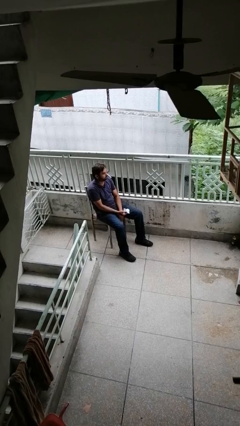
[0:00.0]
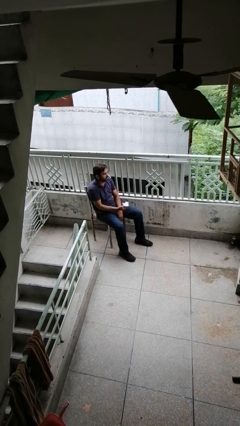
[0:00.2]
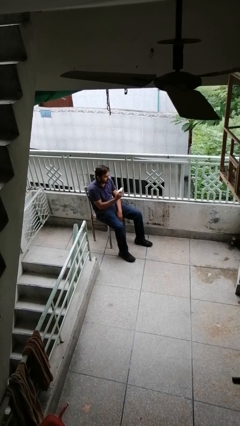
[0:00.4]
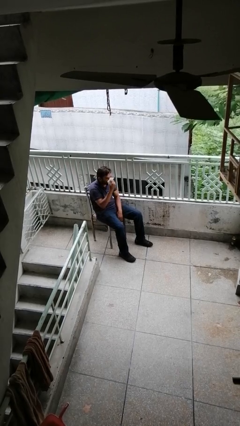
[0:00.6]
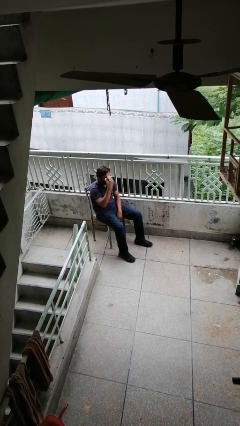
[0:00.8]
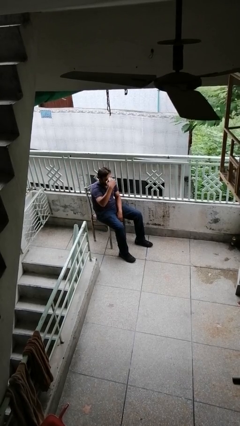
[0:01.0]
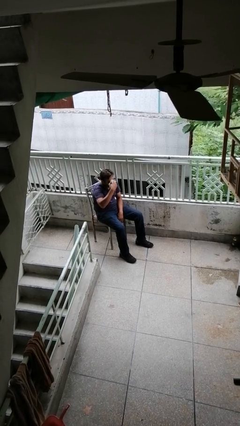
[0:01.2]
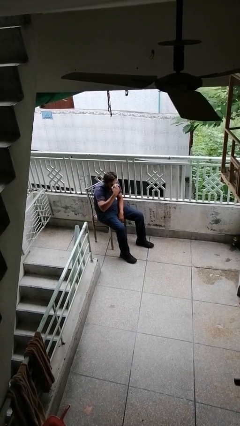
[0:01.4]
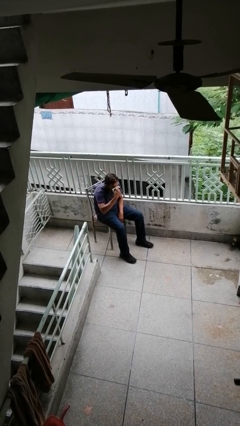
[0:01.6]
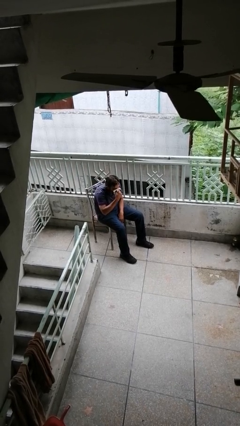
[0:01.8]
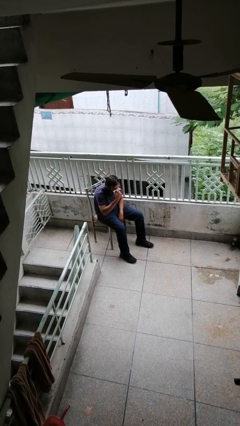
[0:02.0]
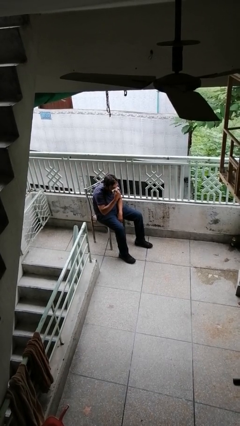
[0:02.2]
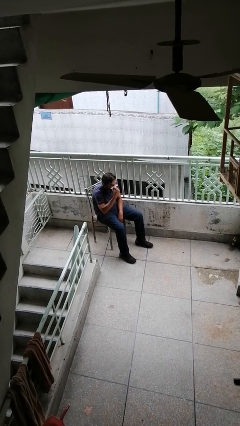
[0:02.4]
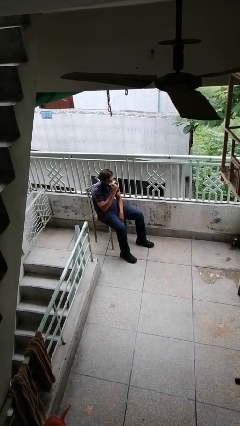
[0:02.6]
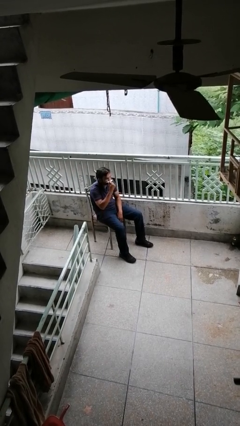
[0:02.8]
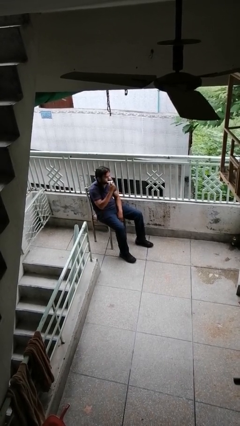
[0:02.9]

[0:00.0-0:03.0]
person blows nose

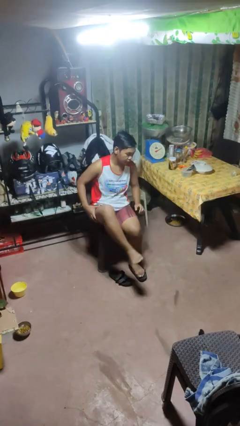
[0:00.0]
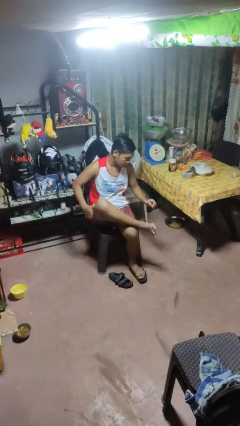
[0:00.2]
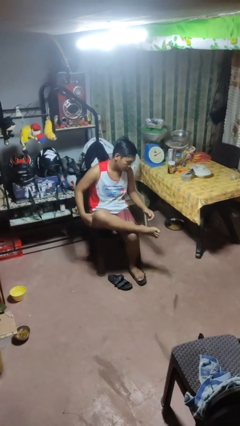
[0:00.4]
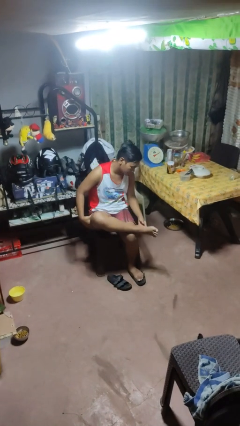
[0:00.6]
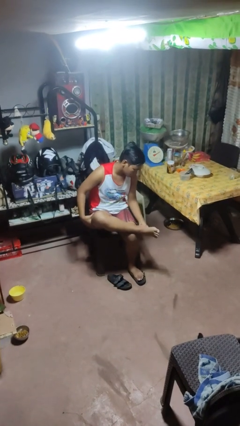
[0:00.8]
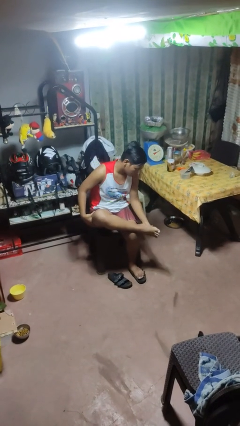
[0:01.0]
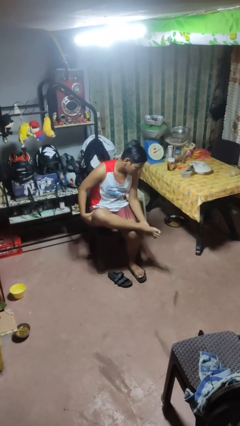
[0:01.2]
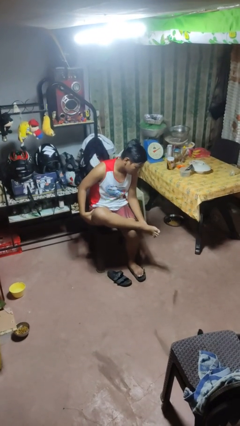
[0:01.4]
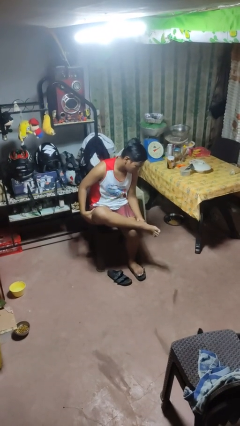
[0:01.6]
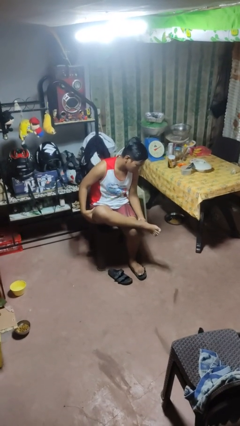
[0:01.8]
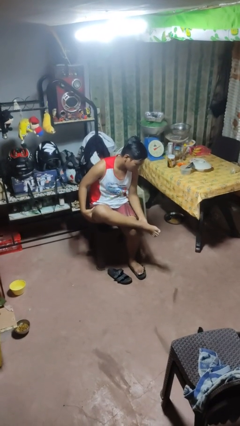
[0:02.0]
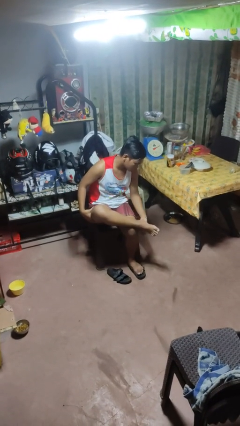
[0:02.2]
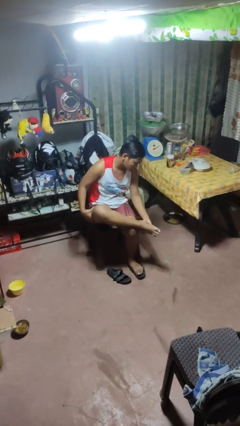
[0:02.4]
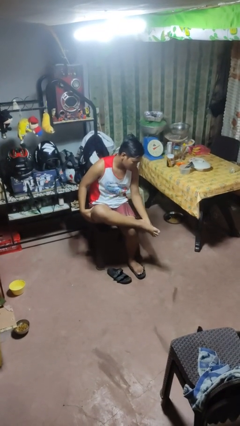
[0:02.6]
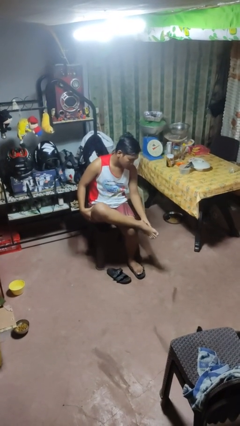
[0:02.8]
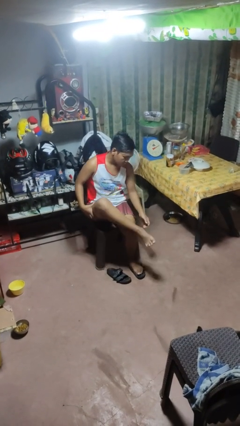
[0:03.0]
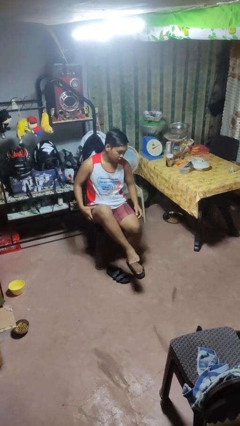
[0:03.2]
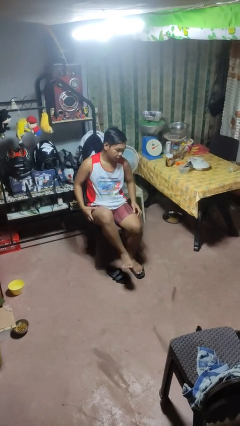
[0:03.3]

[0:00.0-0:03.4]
person rubs foot

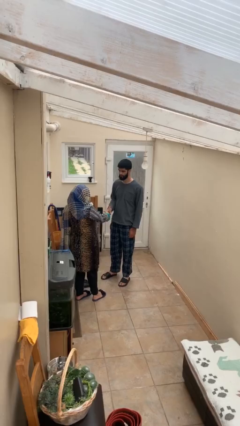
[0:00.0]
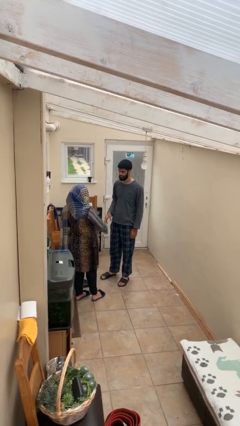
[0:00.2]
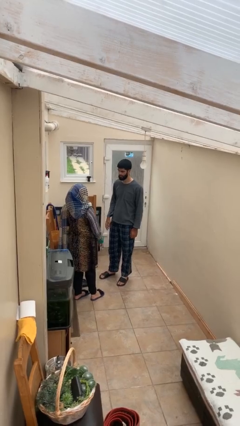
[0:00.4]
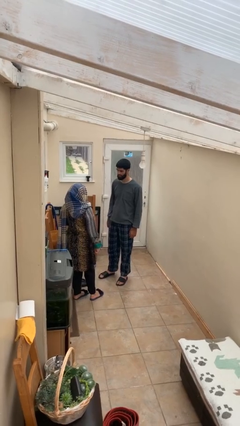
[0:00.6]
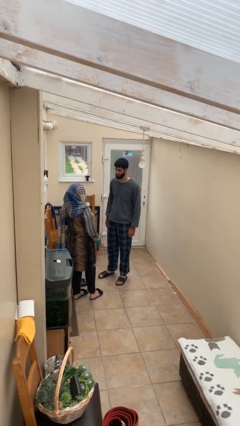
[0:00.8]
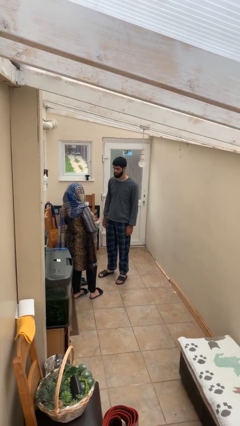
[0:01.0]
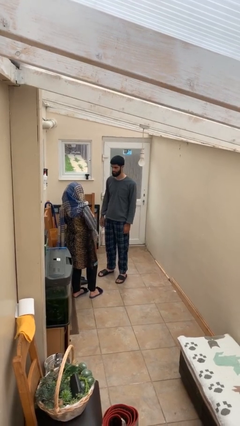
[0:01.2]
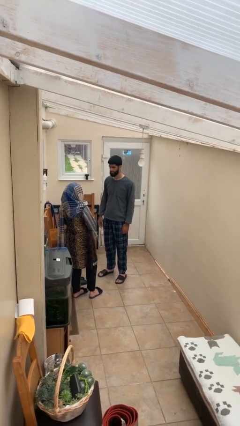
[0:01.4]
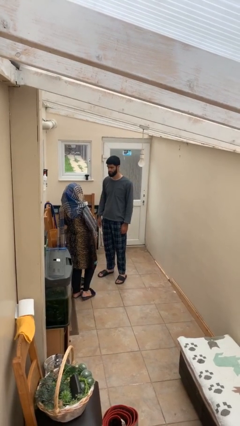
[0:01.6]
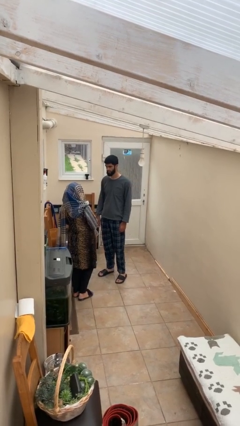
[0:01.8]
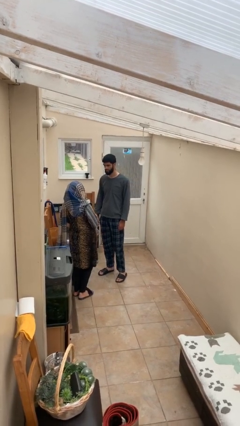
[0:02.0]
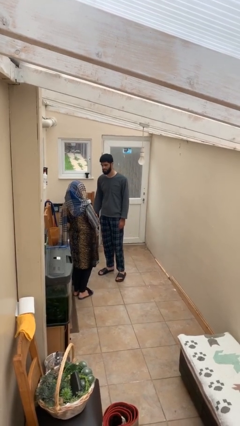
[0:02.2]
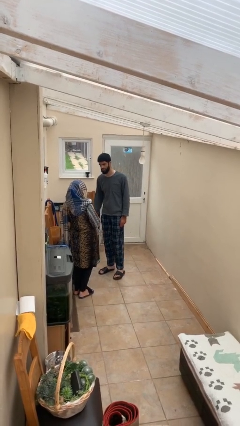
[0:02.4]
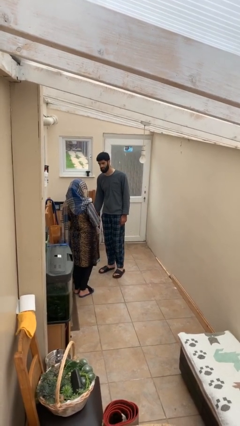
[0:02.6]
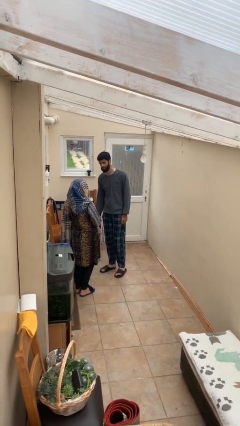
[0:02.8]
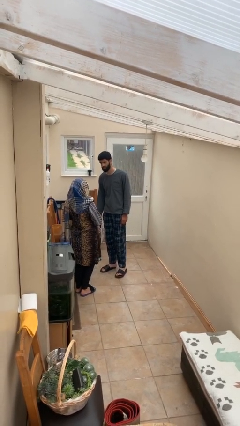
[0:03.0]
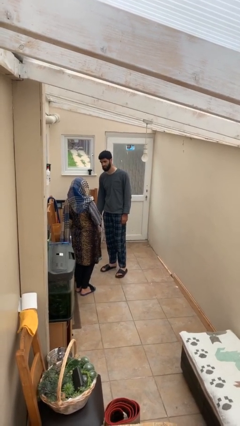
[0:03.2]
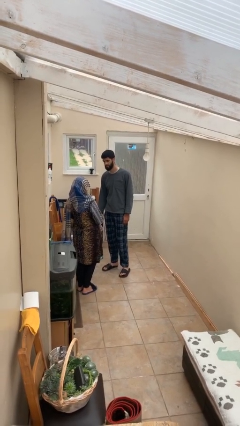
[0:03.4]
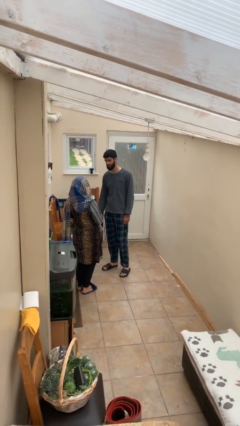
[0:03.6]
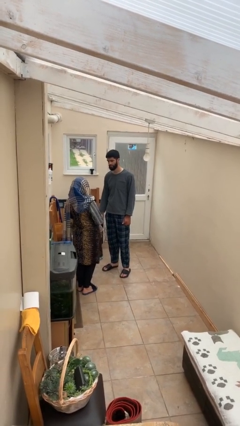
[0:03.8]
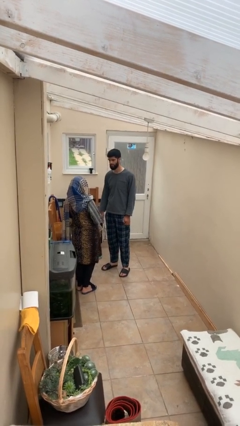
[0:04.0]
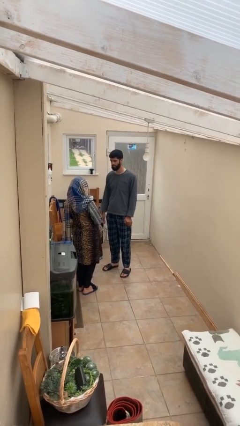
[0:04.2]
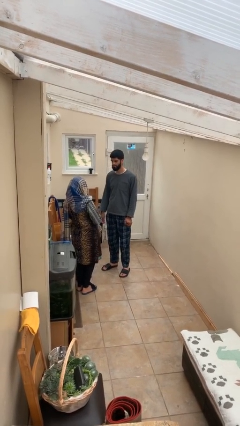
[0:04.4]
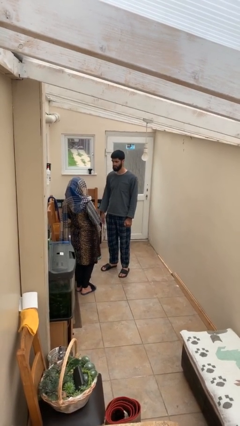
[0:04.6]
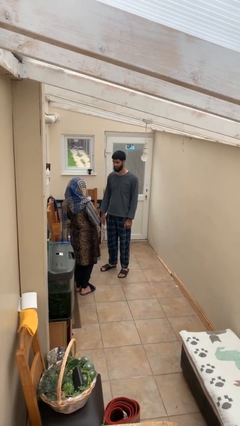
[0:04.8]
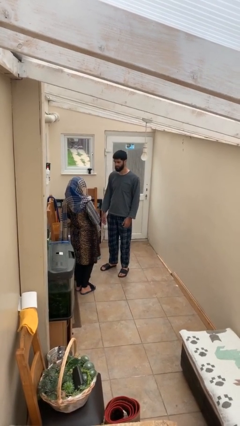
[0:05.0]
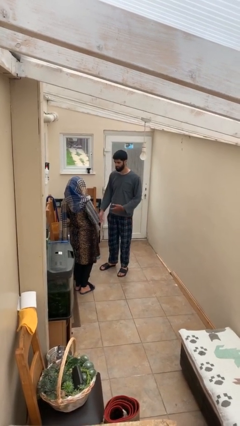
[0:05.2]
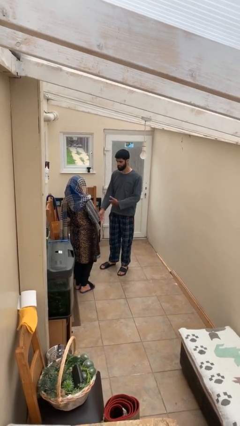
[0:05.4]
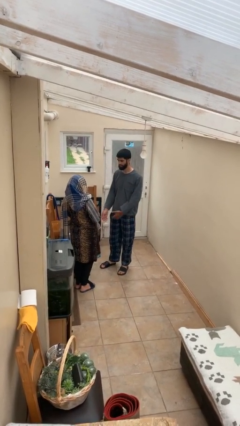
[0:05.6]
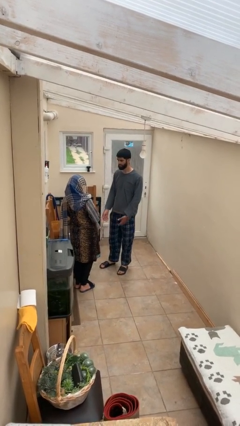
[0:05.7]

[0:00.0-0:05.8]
person talks to person

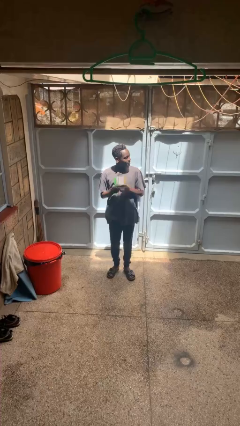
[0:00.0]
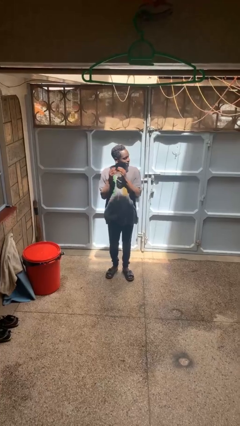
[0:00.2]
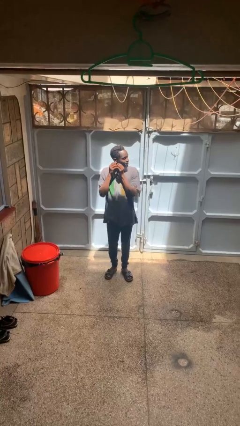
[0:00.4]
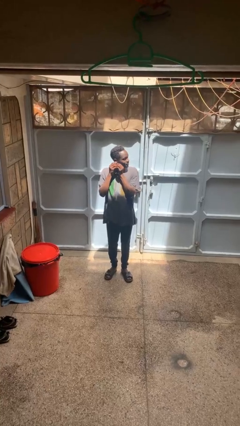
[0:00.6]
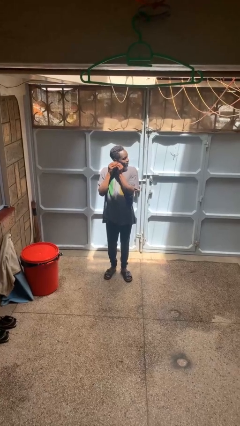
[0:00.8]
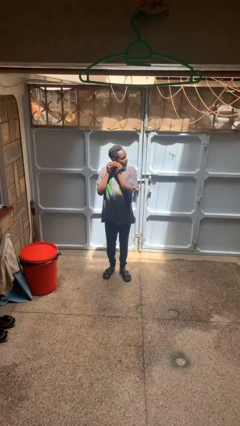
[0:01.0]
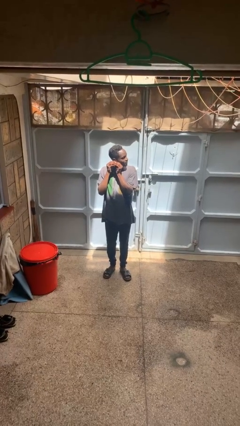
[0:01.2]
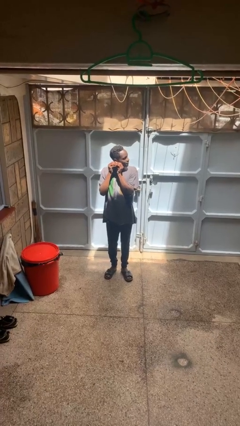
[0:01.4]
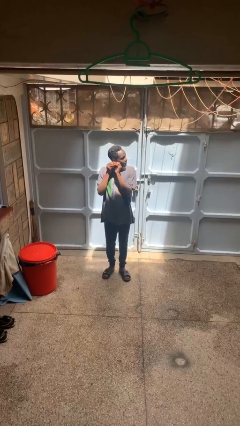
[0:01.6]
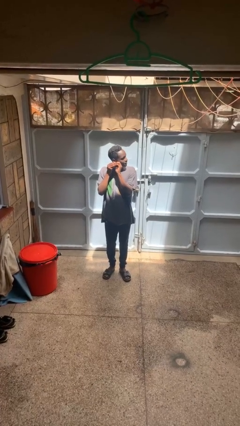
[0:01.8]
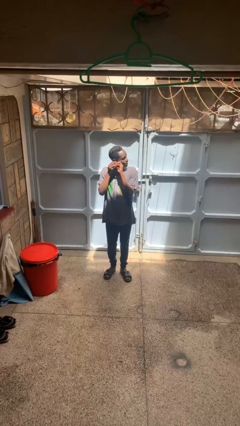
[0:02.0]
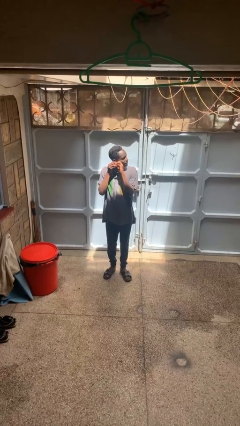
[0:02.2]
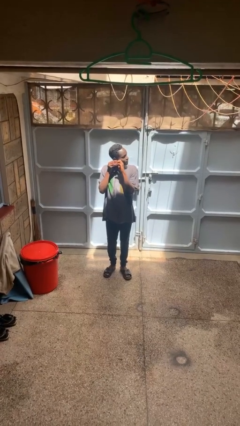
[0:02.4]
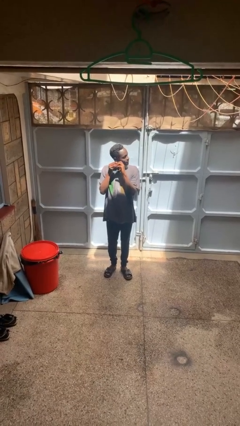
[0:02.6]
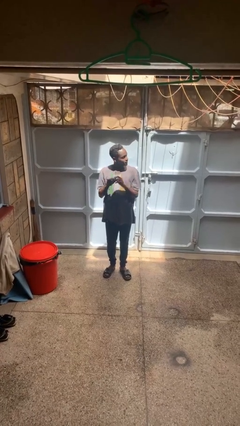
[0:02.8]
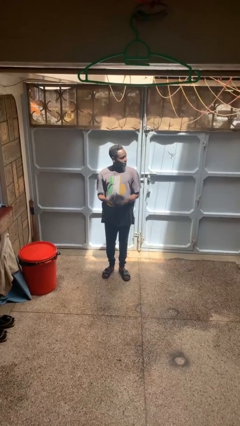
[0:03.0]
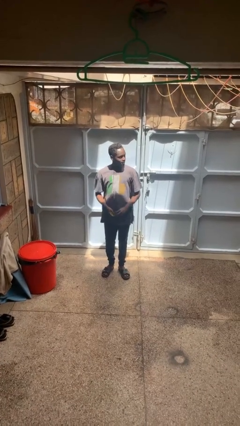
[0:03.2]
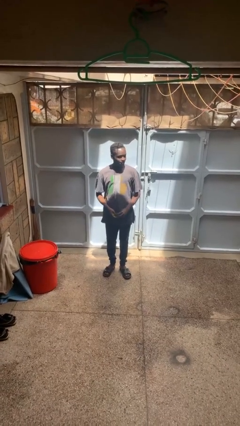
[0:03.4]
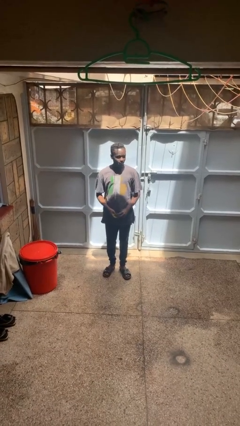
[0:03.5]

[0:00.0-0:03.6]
person takes off earrings

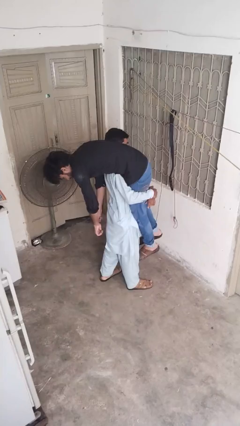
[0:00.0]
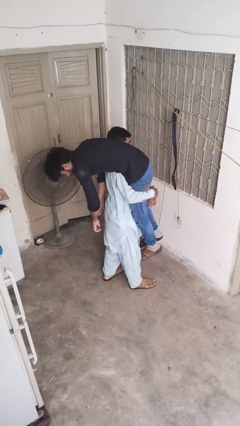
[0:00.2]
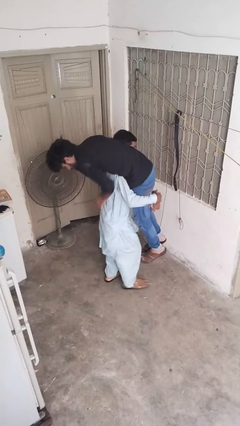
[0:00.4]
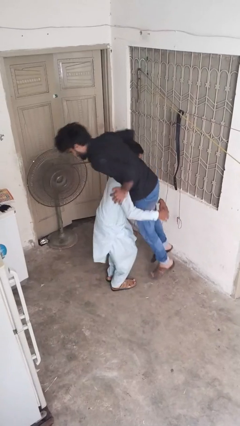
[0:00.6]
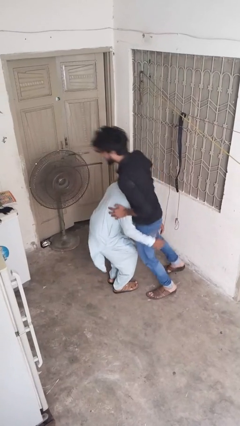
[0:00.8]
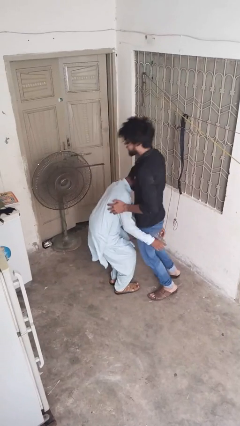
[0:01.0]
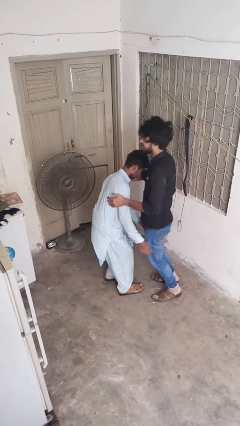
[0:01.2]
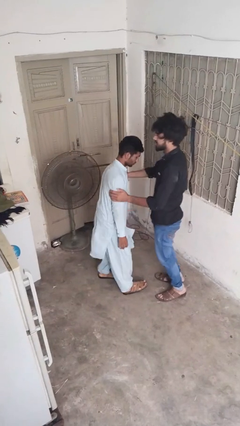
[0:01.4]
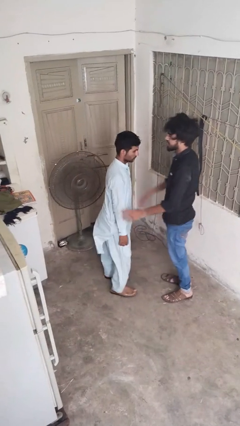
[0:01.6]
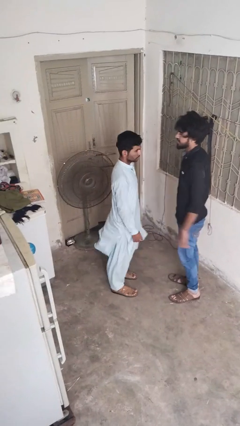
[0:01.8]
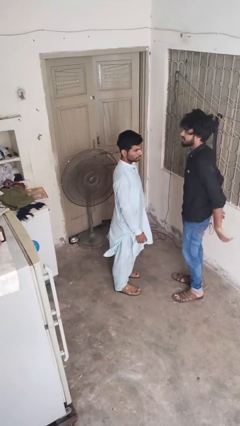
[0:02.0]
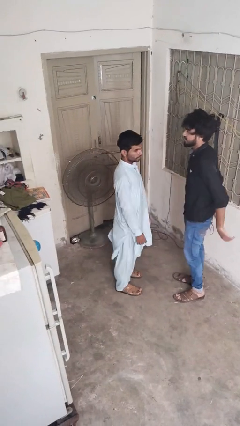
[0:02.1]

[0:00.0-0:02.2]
person puts down person
